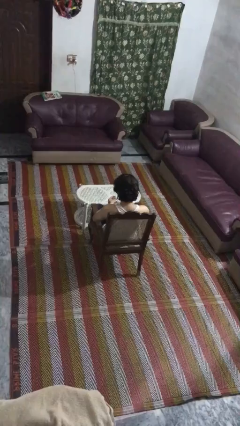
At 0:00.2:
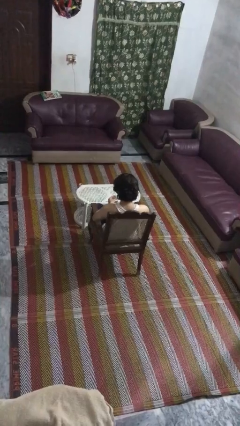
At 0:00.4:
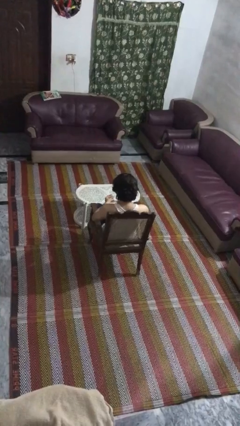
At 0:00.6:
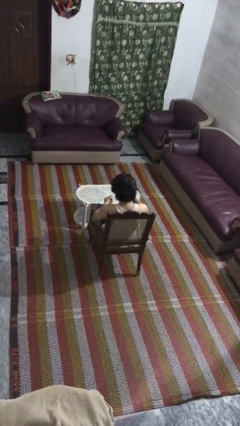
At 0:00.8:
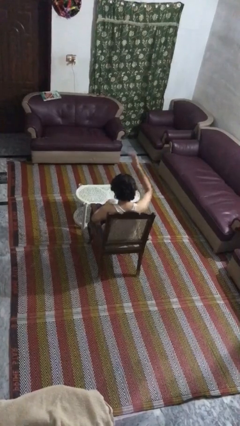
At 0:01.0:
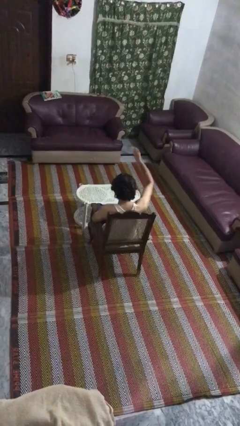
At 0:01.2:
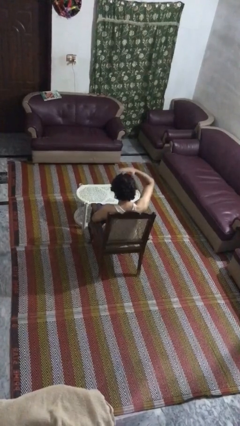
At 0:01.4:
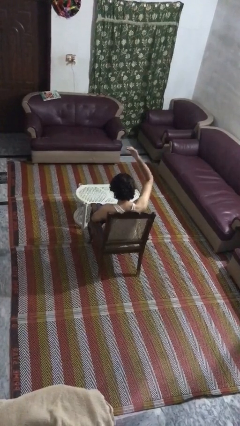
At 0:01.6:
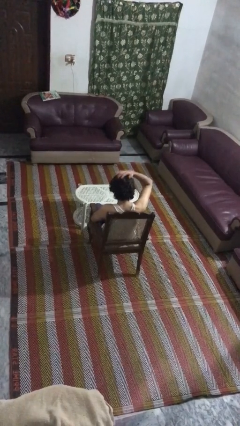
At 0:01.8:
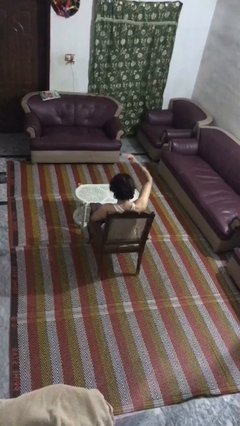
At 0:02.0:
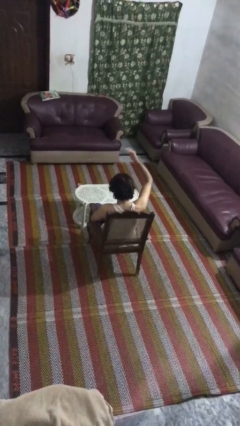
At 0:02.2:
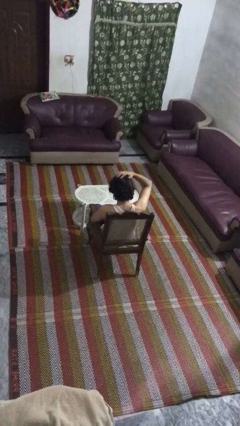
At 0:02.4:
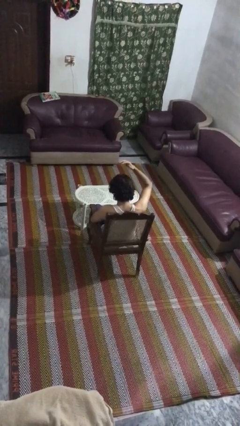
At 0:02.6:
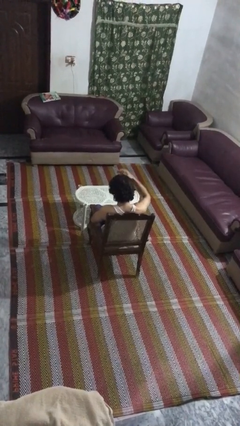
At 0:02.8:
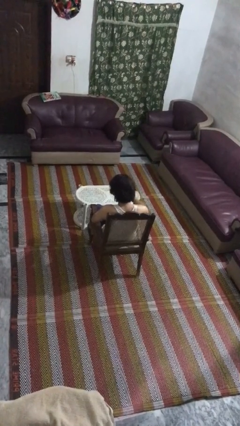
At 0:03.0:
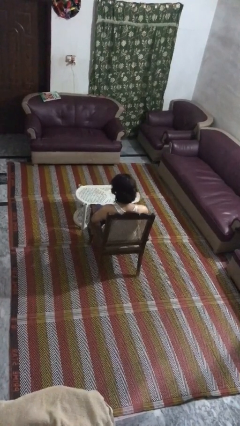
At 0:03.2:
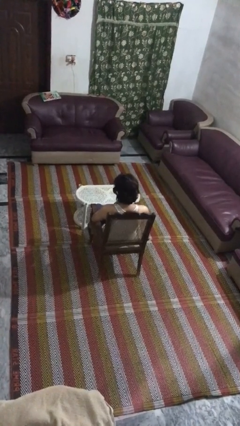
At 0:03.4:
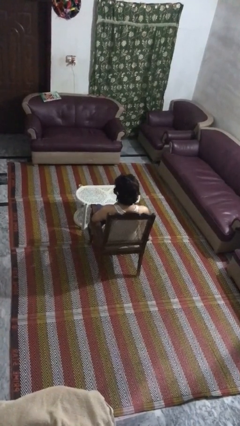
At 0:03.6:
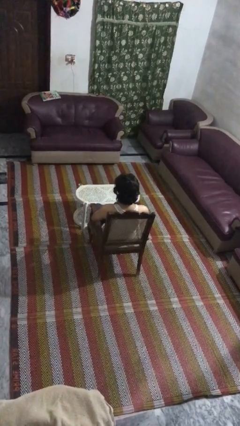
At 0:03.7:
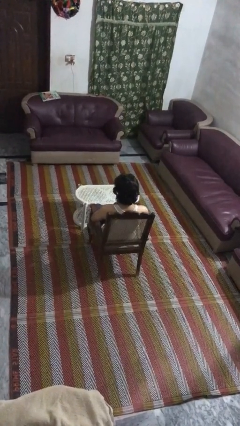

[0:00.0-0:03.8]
person pats head

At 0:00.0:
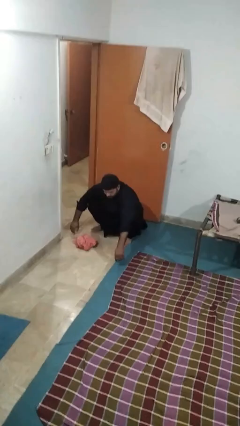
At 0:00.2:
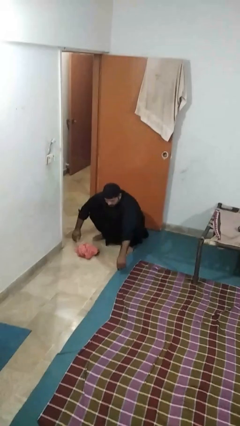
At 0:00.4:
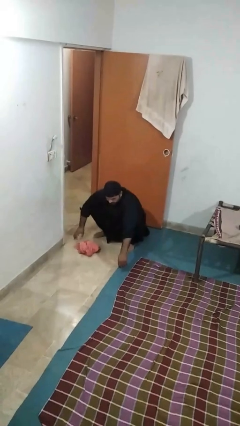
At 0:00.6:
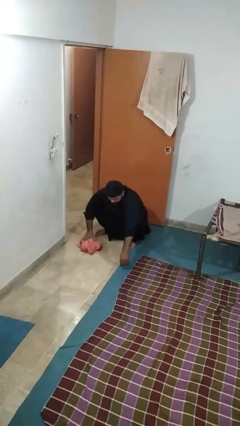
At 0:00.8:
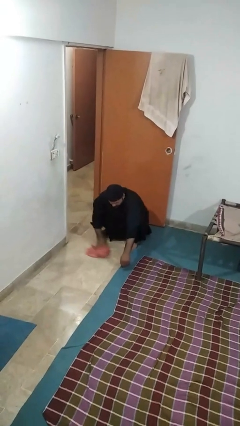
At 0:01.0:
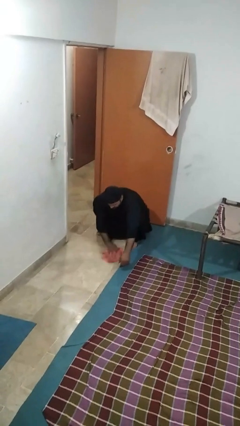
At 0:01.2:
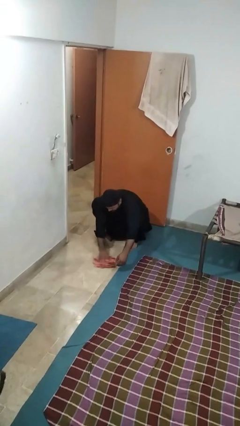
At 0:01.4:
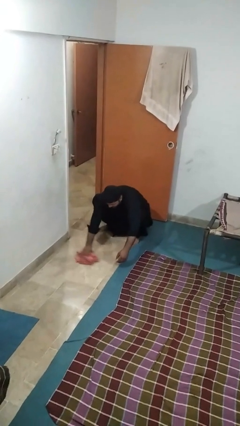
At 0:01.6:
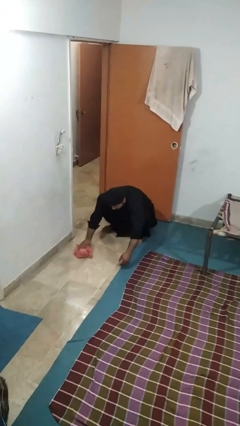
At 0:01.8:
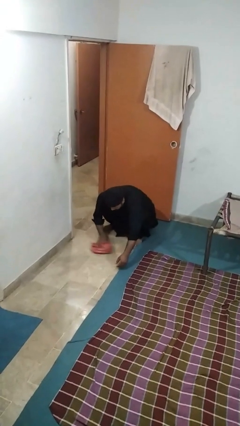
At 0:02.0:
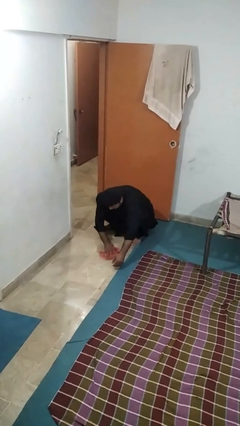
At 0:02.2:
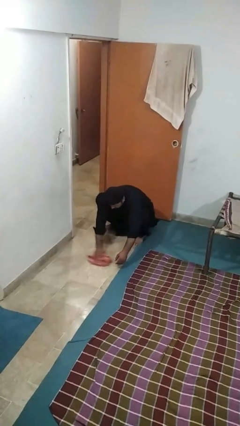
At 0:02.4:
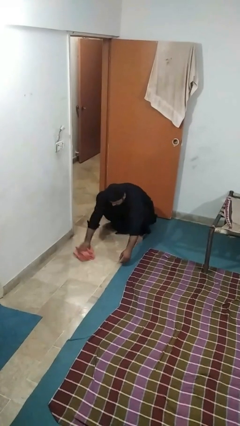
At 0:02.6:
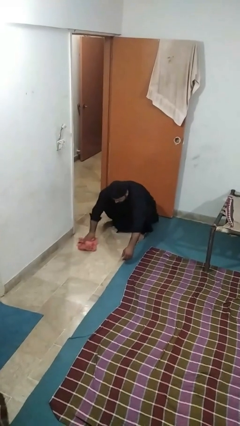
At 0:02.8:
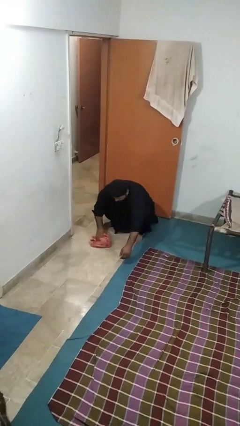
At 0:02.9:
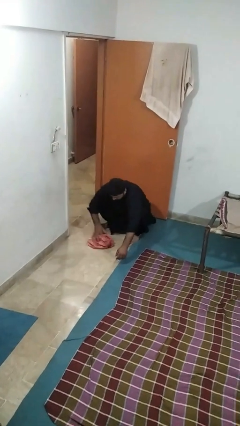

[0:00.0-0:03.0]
person mops

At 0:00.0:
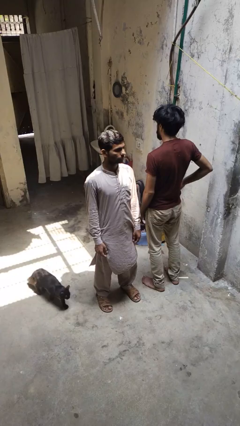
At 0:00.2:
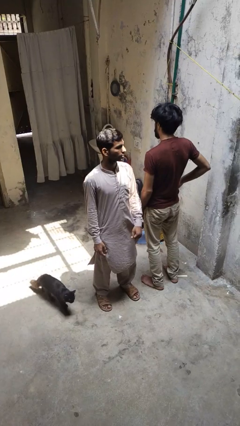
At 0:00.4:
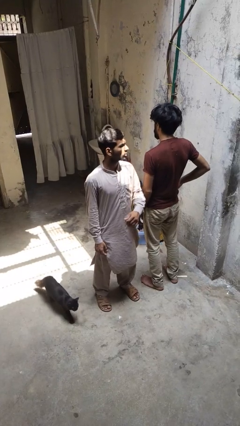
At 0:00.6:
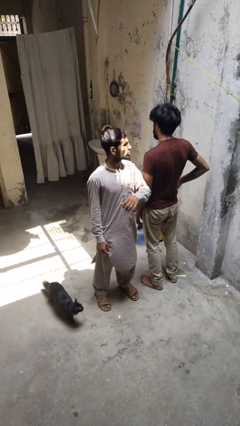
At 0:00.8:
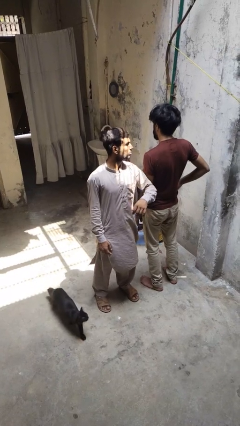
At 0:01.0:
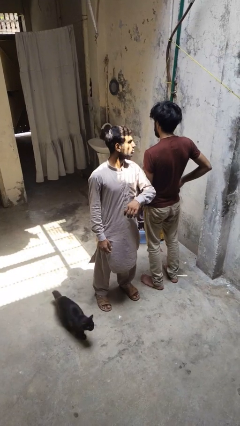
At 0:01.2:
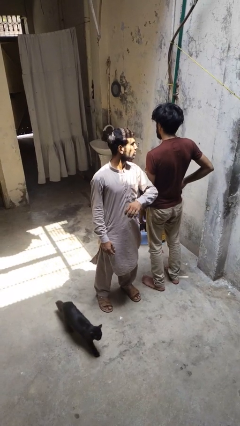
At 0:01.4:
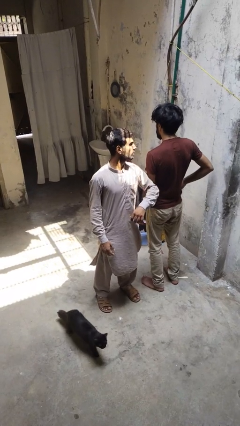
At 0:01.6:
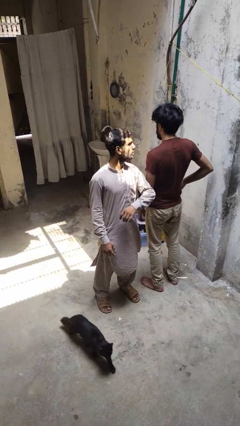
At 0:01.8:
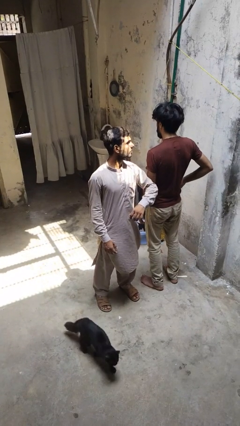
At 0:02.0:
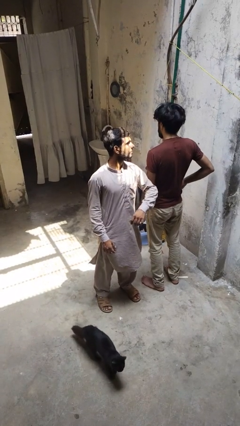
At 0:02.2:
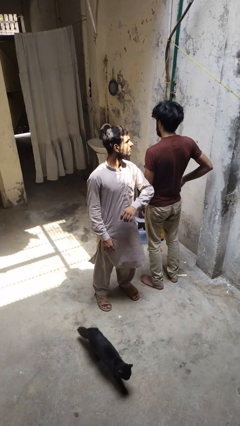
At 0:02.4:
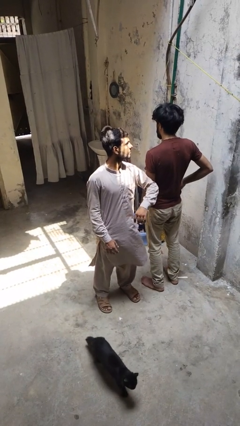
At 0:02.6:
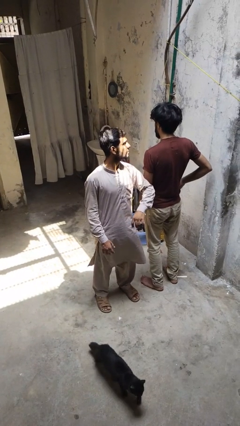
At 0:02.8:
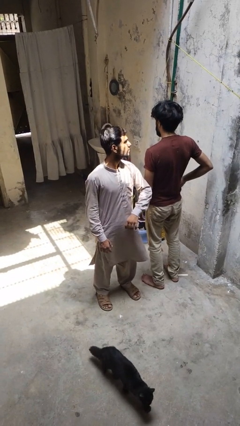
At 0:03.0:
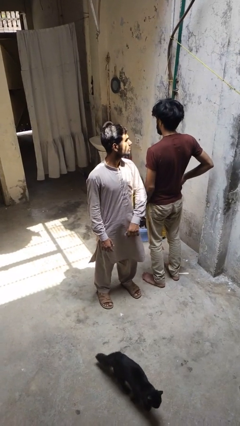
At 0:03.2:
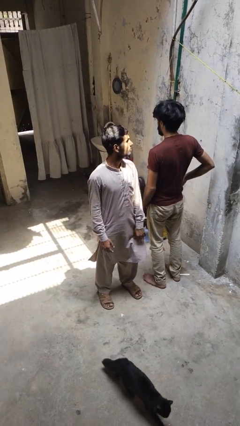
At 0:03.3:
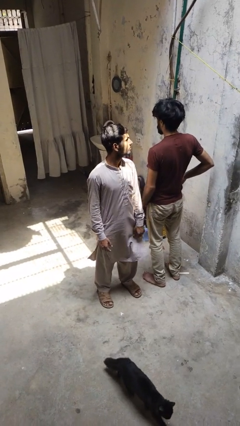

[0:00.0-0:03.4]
person nudges person with elbow

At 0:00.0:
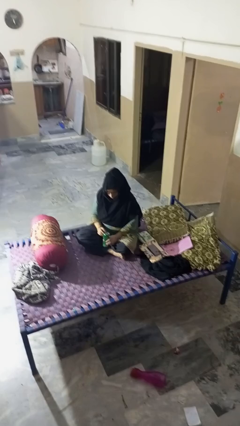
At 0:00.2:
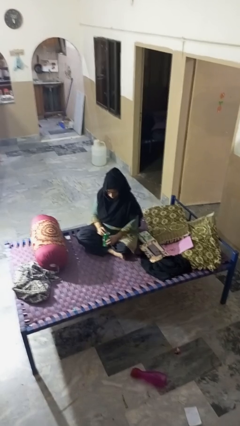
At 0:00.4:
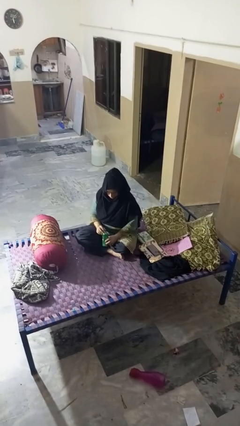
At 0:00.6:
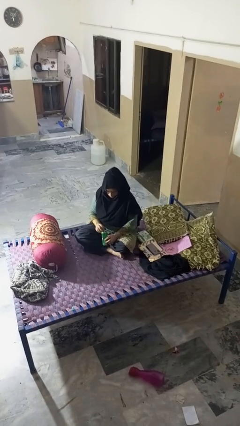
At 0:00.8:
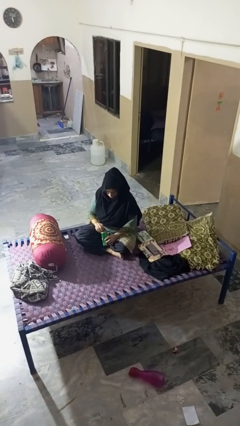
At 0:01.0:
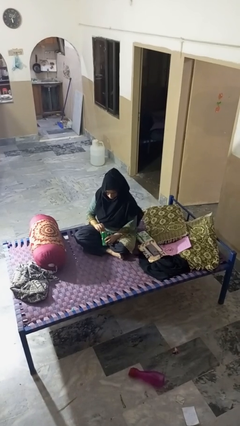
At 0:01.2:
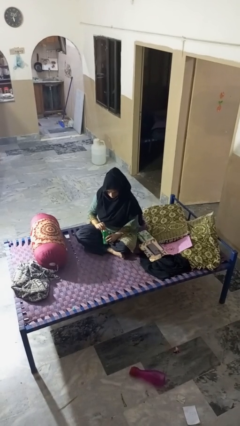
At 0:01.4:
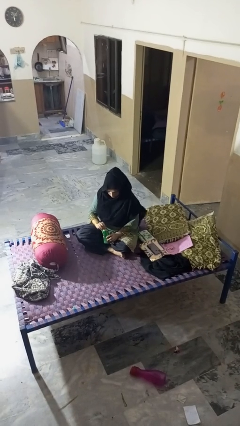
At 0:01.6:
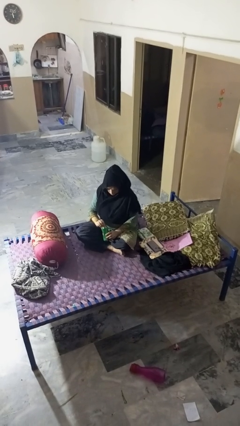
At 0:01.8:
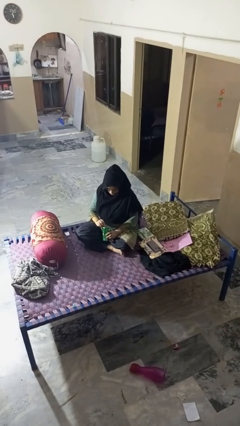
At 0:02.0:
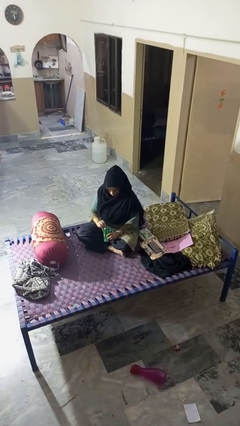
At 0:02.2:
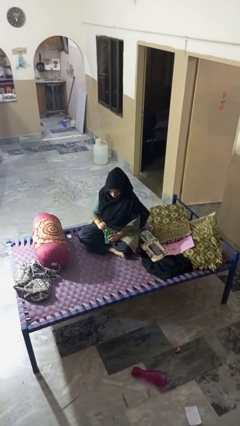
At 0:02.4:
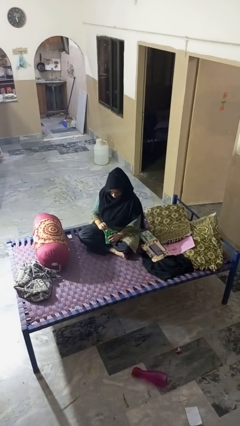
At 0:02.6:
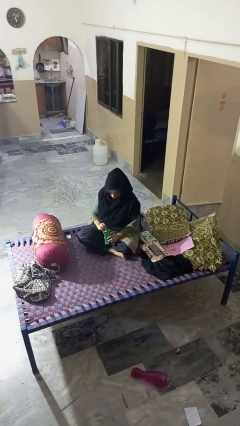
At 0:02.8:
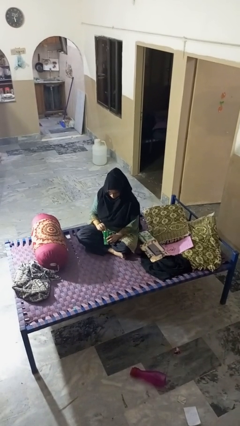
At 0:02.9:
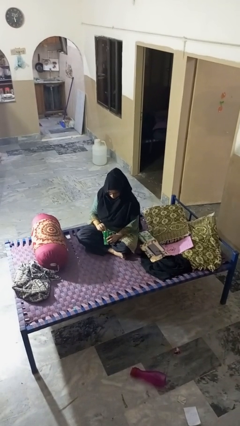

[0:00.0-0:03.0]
person opens can with can opener

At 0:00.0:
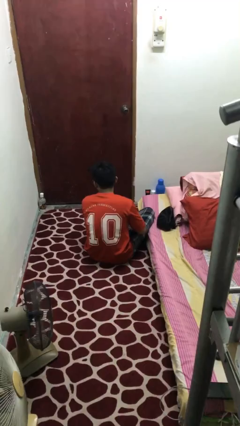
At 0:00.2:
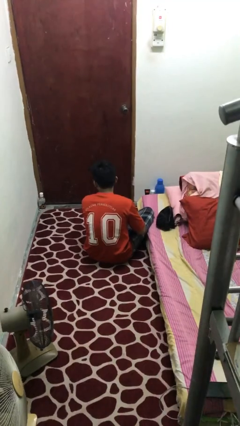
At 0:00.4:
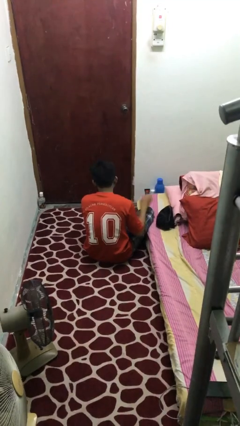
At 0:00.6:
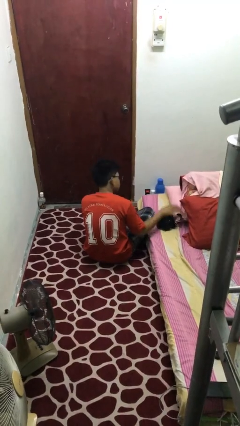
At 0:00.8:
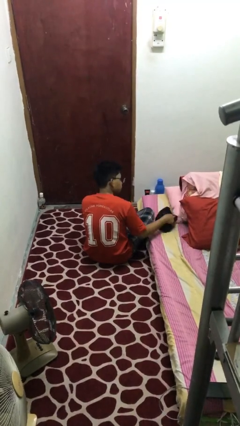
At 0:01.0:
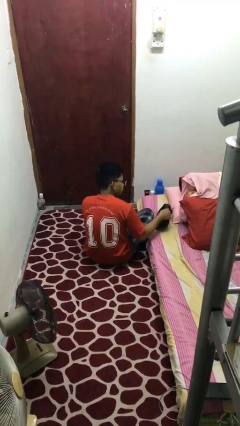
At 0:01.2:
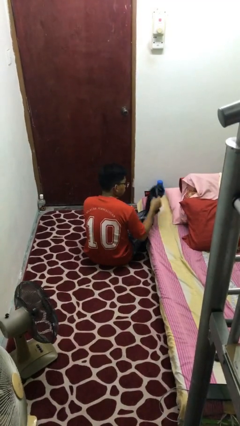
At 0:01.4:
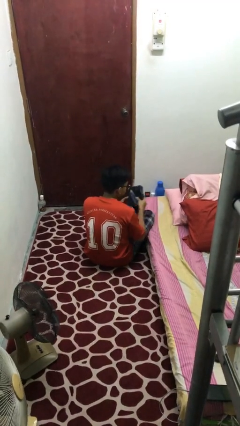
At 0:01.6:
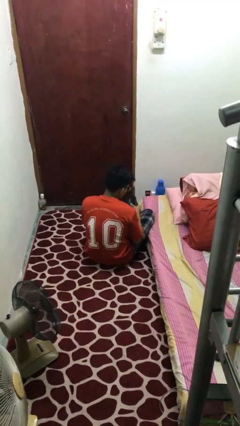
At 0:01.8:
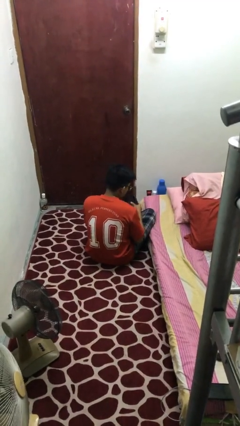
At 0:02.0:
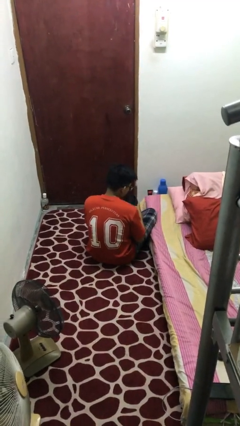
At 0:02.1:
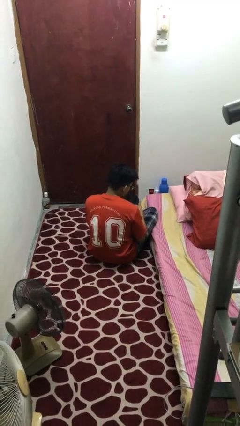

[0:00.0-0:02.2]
person picks up object from bed

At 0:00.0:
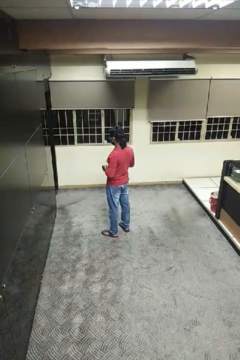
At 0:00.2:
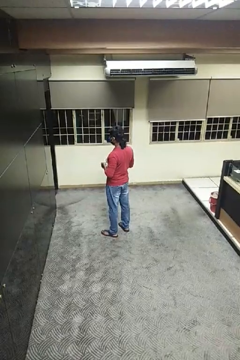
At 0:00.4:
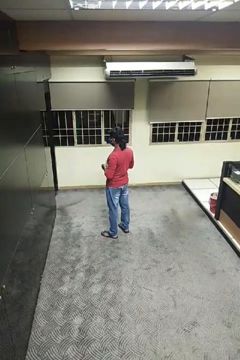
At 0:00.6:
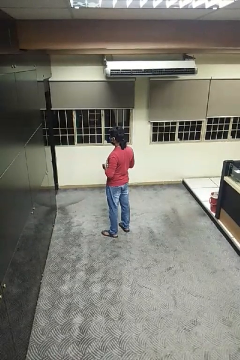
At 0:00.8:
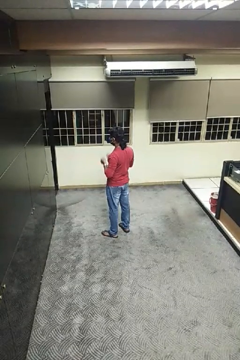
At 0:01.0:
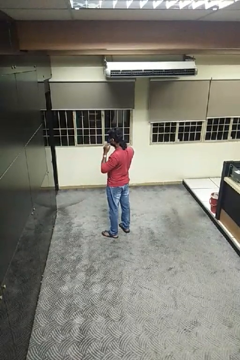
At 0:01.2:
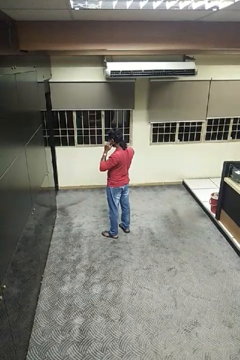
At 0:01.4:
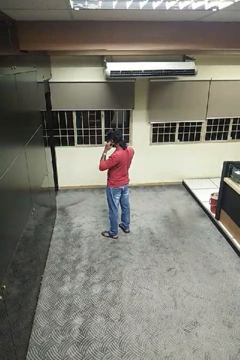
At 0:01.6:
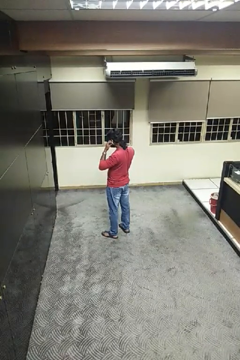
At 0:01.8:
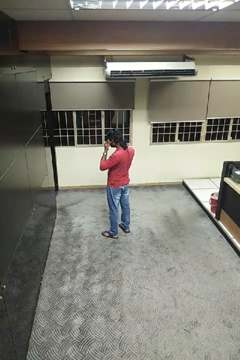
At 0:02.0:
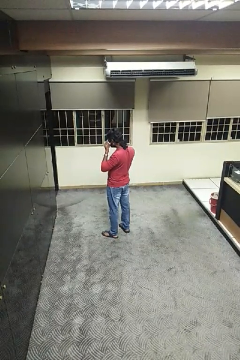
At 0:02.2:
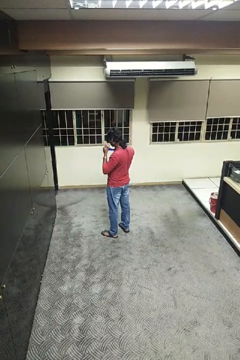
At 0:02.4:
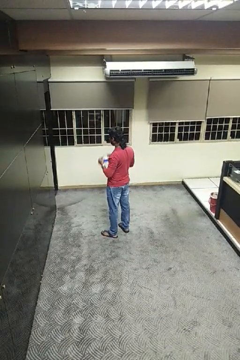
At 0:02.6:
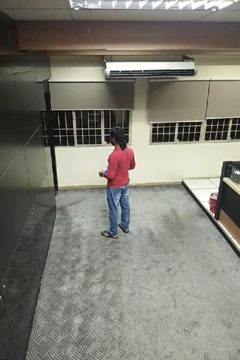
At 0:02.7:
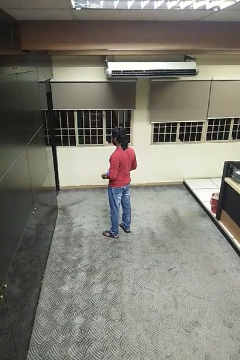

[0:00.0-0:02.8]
person takes off facemask
